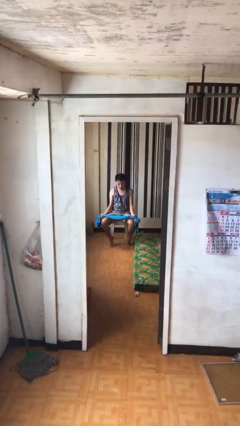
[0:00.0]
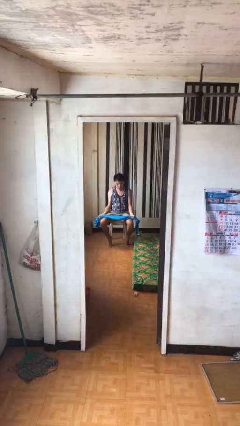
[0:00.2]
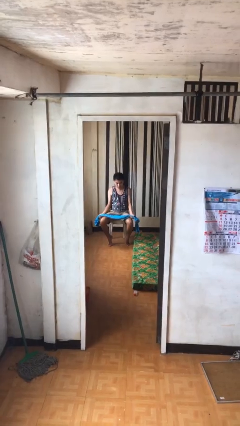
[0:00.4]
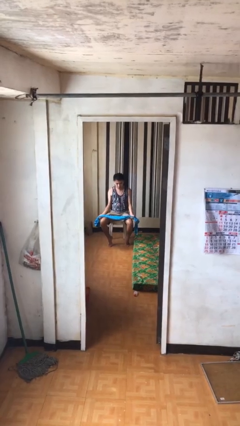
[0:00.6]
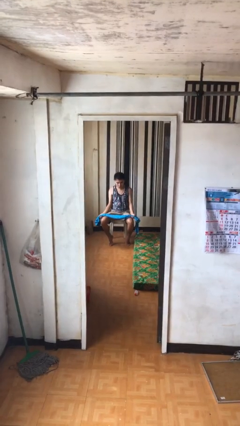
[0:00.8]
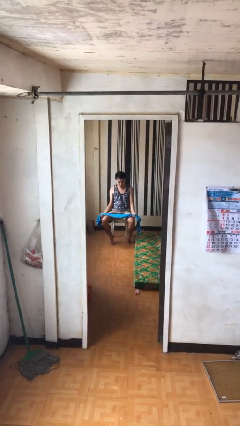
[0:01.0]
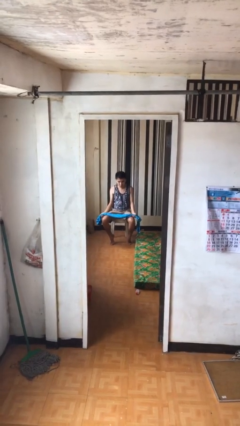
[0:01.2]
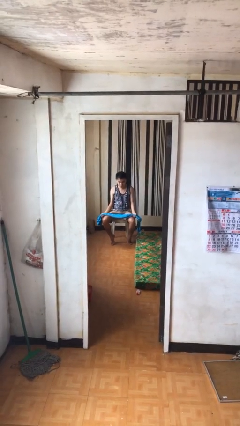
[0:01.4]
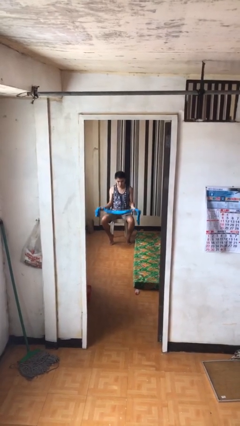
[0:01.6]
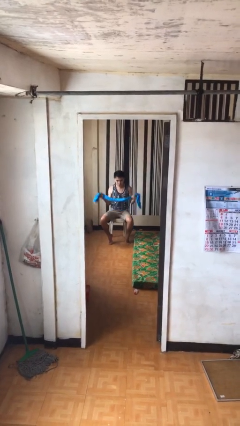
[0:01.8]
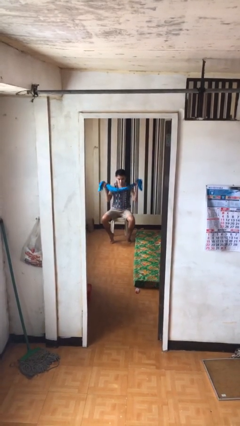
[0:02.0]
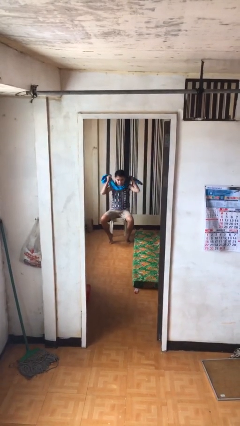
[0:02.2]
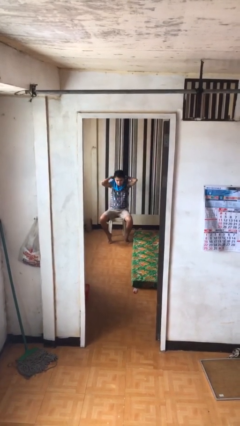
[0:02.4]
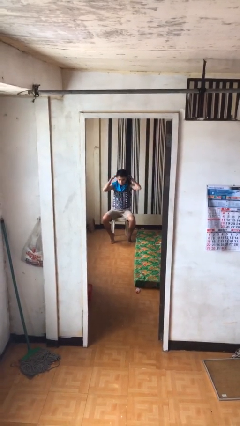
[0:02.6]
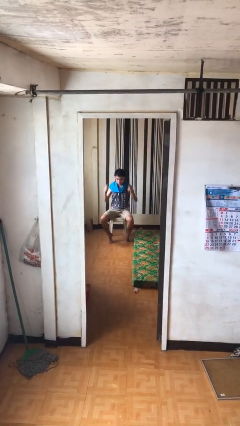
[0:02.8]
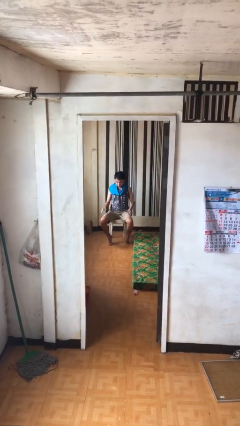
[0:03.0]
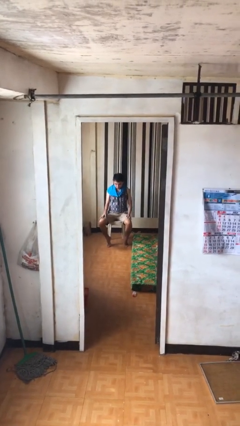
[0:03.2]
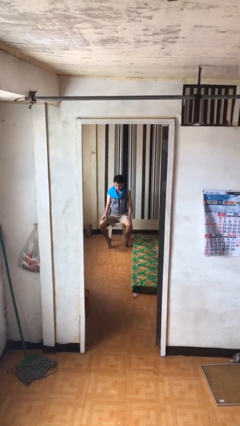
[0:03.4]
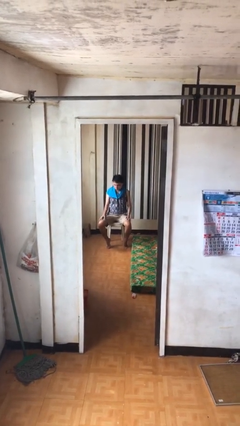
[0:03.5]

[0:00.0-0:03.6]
person puts on scarf

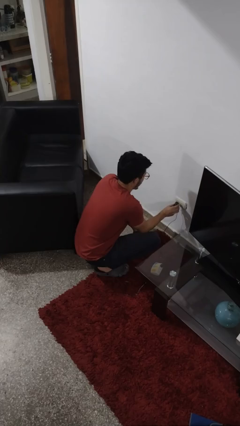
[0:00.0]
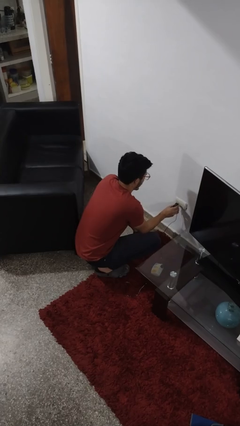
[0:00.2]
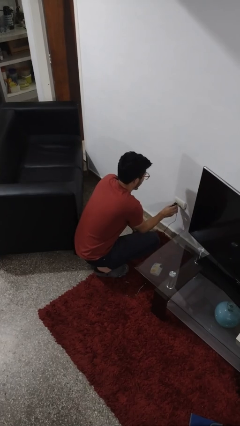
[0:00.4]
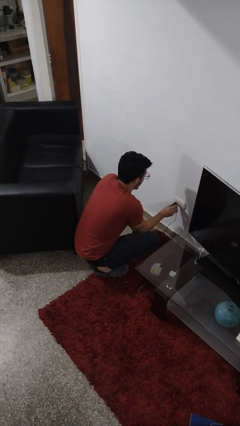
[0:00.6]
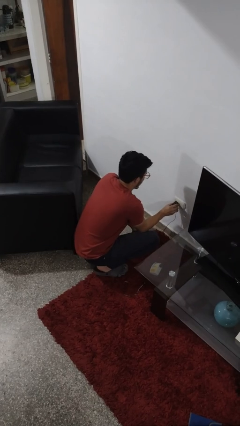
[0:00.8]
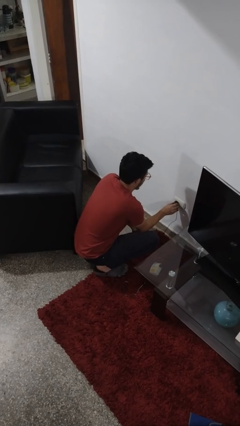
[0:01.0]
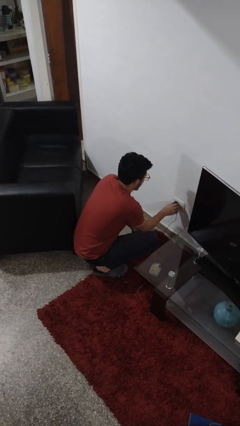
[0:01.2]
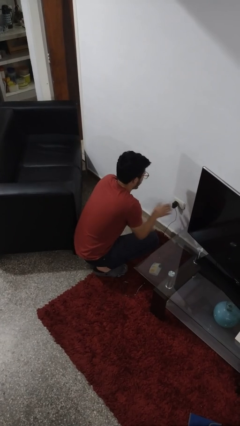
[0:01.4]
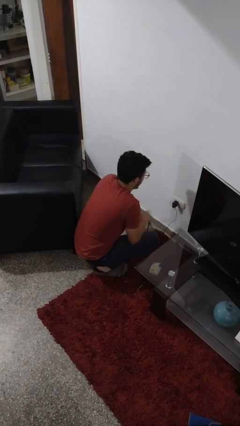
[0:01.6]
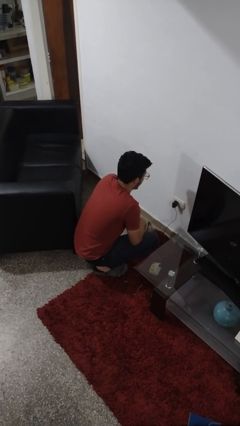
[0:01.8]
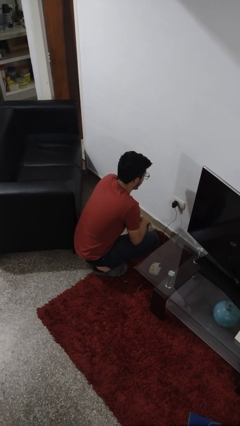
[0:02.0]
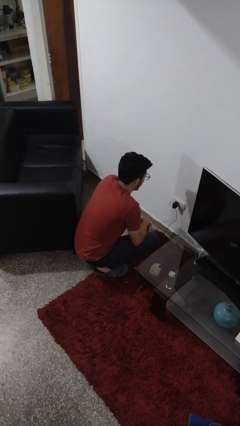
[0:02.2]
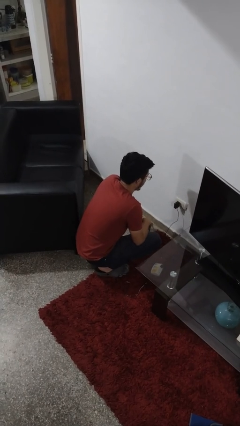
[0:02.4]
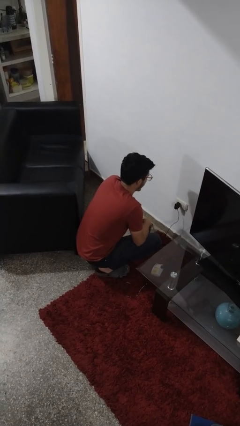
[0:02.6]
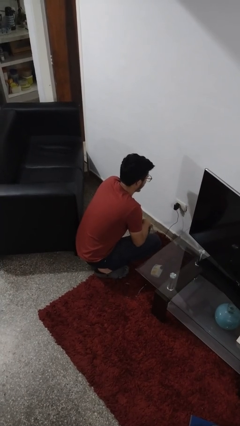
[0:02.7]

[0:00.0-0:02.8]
person plugs into electrical socket

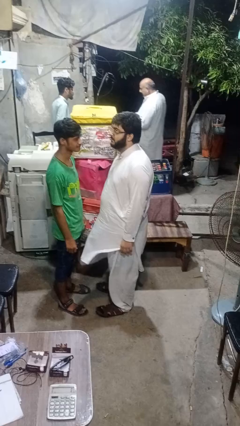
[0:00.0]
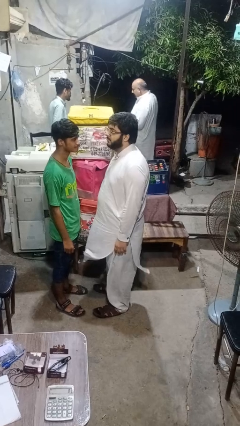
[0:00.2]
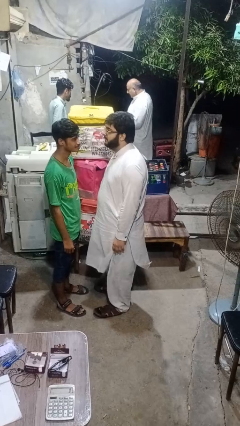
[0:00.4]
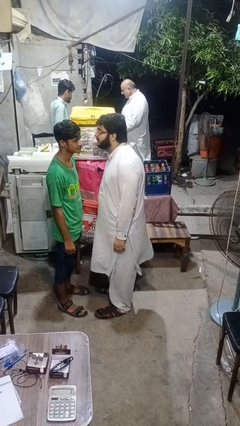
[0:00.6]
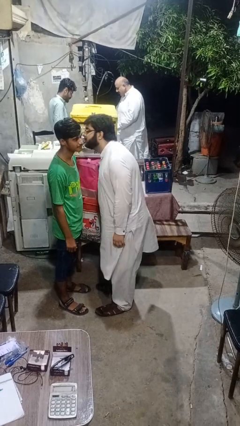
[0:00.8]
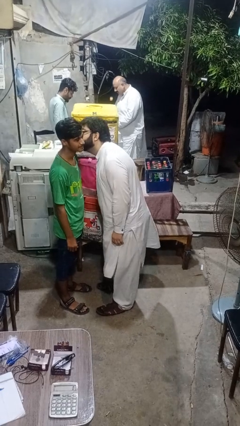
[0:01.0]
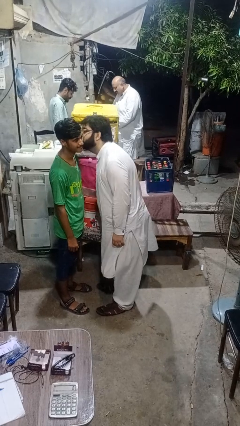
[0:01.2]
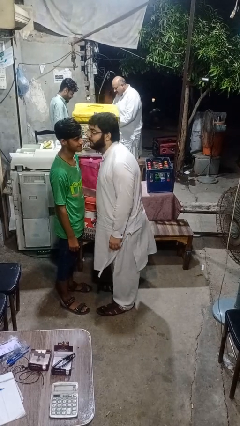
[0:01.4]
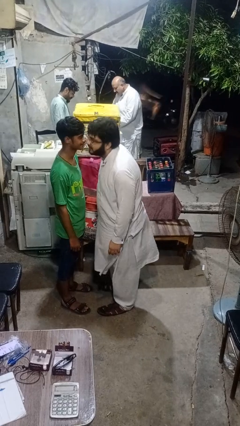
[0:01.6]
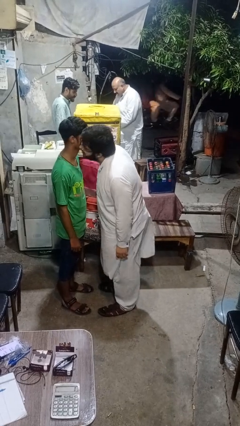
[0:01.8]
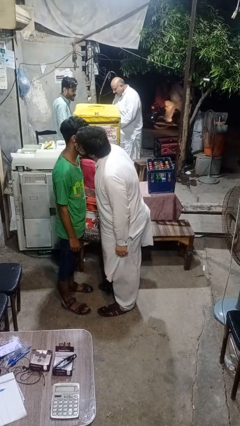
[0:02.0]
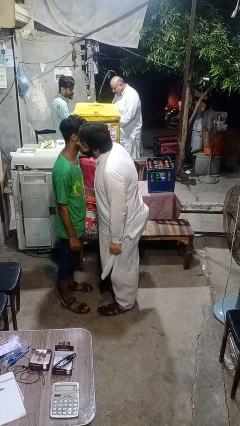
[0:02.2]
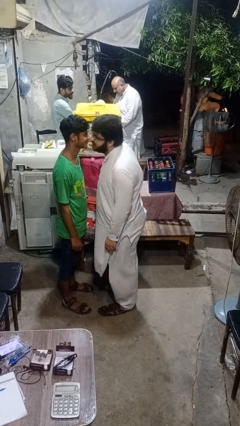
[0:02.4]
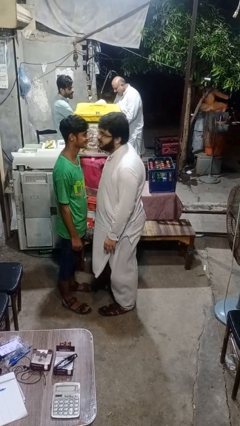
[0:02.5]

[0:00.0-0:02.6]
person kisses cheek of person

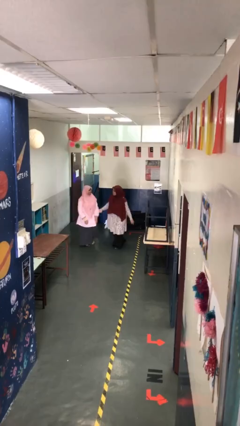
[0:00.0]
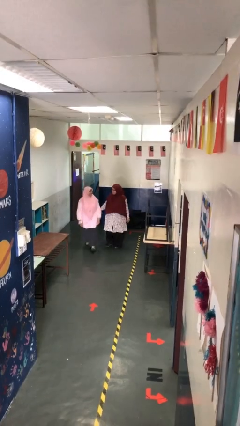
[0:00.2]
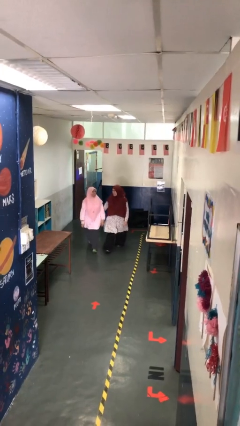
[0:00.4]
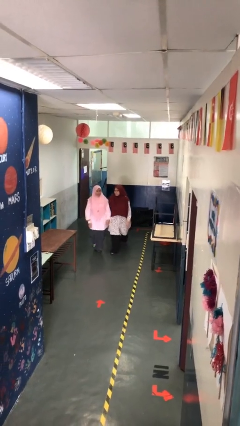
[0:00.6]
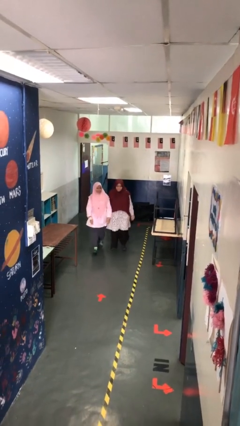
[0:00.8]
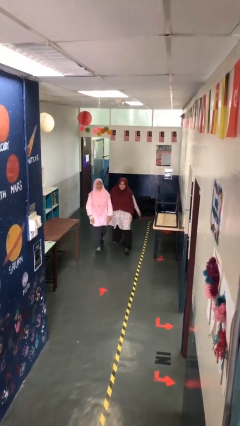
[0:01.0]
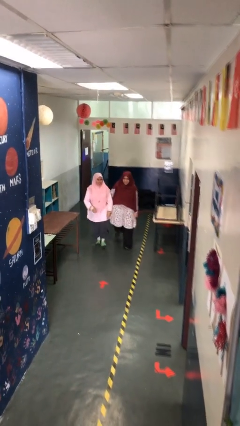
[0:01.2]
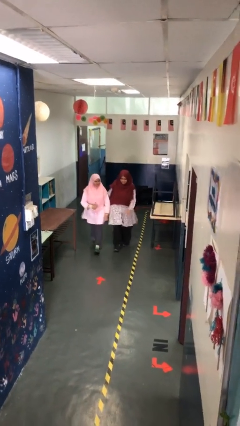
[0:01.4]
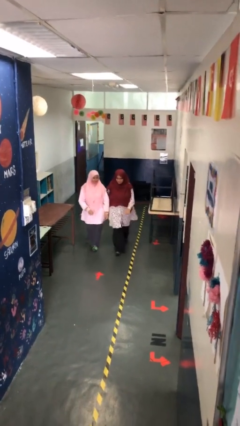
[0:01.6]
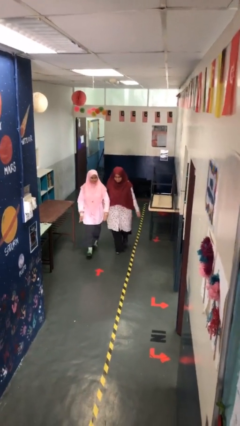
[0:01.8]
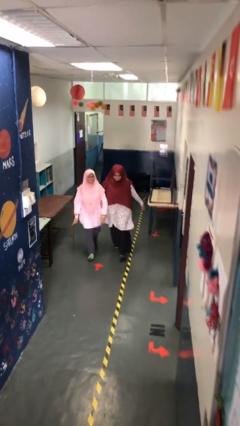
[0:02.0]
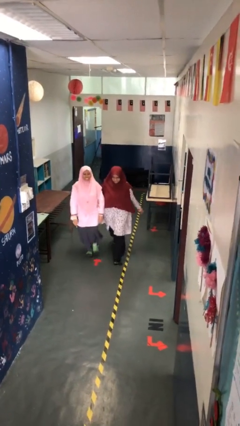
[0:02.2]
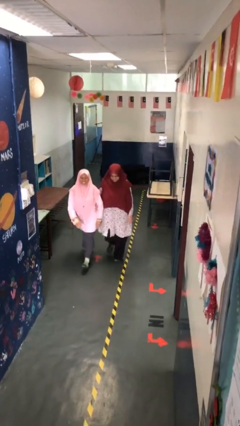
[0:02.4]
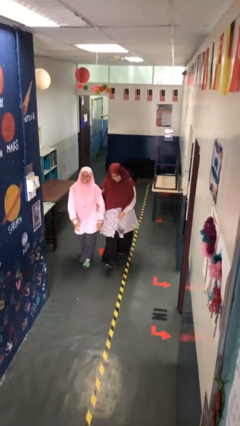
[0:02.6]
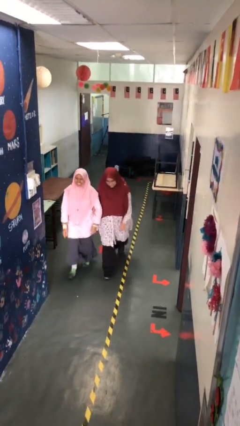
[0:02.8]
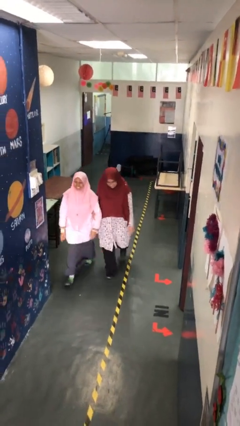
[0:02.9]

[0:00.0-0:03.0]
person talks to person

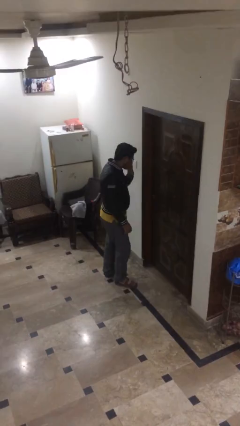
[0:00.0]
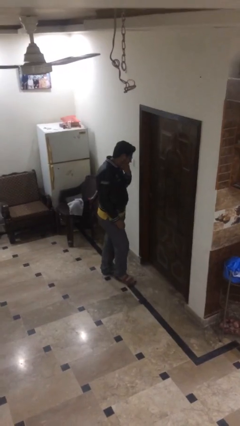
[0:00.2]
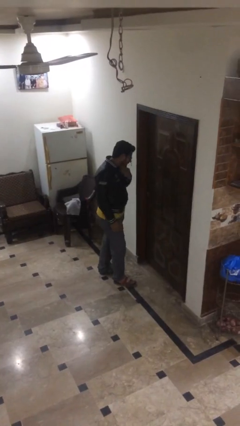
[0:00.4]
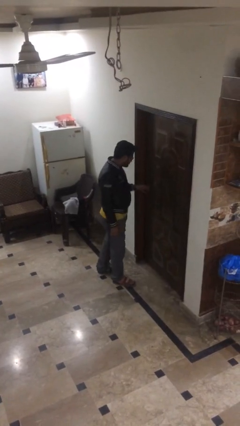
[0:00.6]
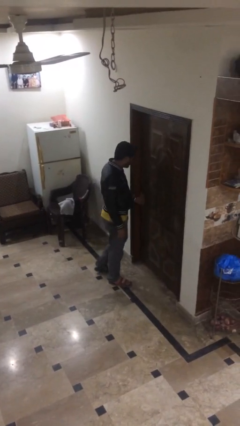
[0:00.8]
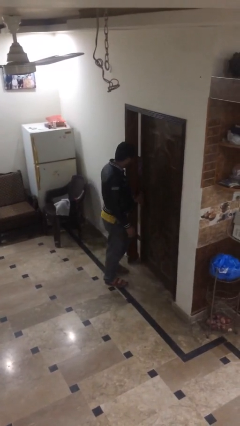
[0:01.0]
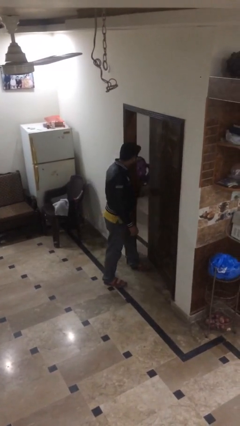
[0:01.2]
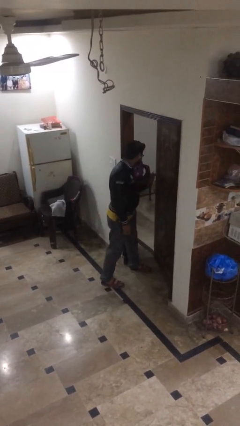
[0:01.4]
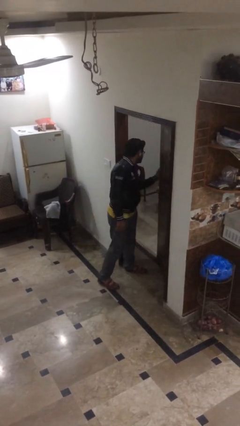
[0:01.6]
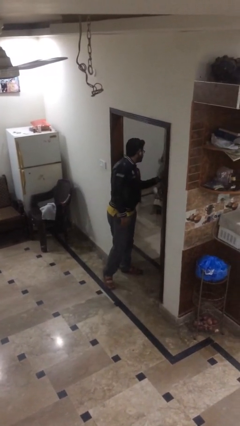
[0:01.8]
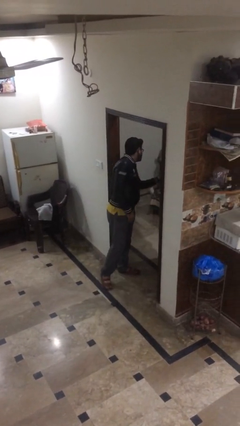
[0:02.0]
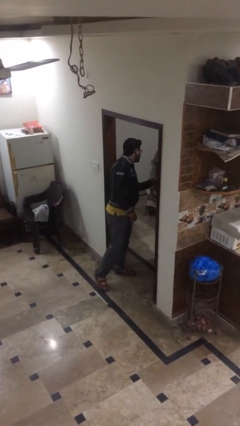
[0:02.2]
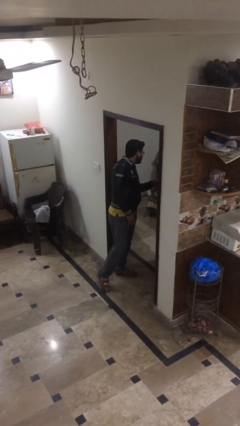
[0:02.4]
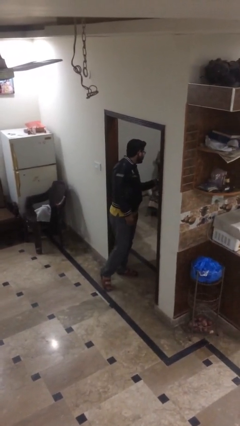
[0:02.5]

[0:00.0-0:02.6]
person opens facility door

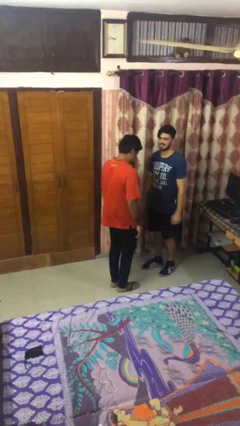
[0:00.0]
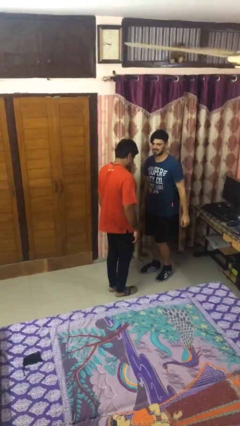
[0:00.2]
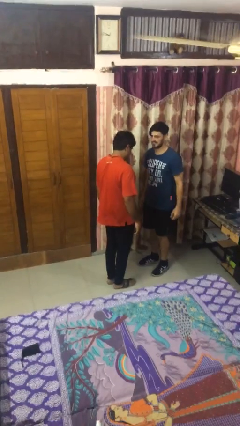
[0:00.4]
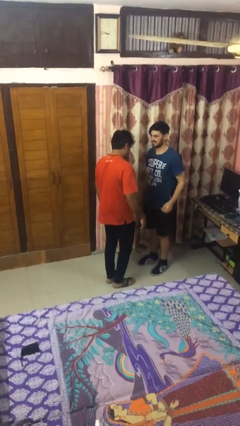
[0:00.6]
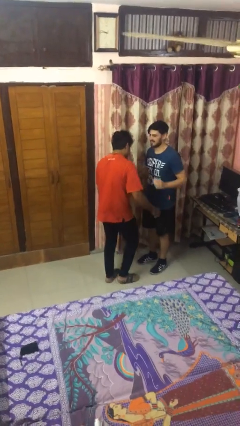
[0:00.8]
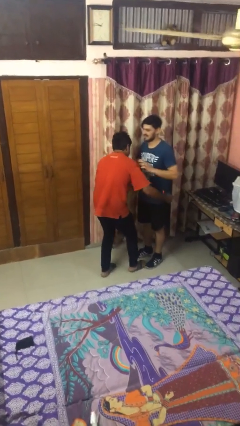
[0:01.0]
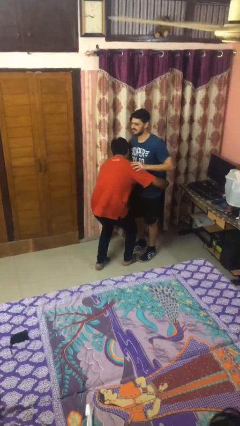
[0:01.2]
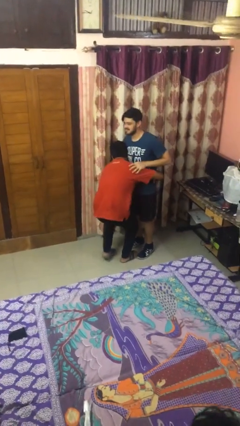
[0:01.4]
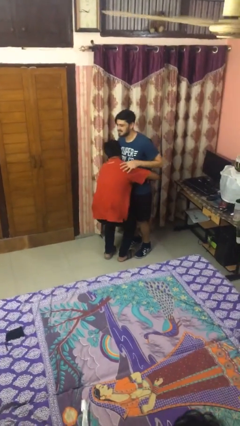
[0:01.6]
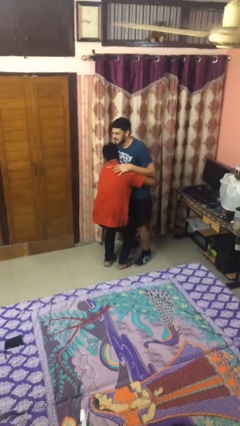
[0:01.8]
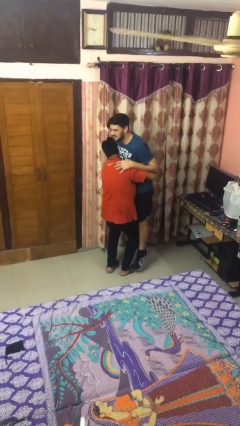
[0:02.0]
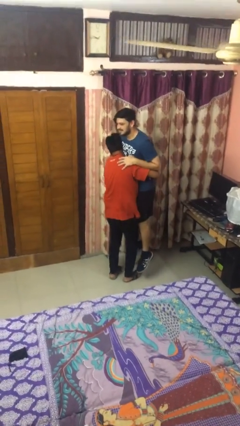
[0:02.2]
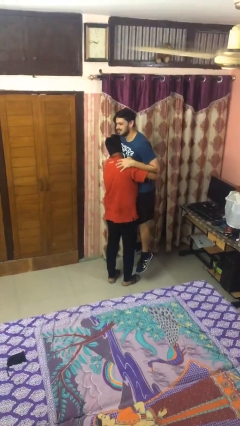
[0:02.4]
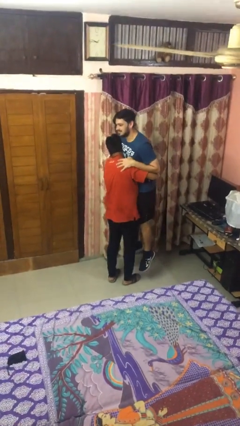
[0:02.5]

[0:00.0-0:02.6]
person picks up person

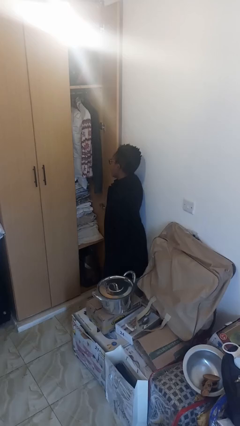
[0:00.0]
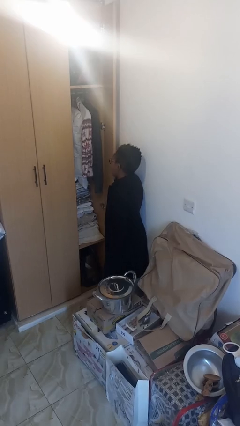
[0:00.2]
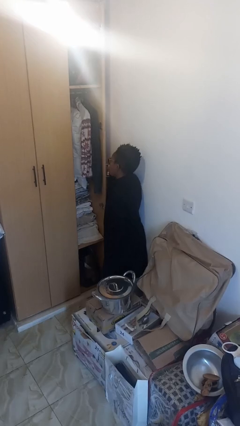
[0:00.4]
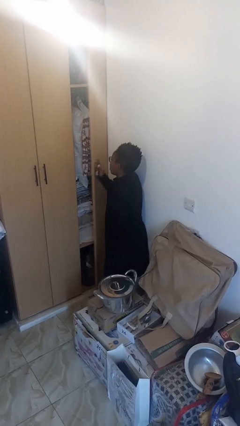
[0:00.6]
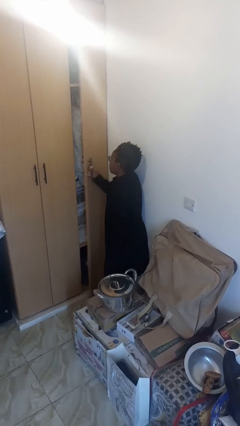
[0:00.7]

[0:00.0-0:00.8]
person closes closet door
